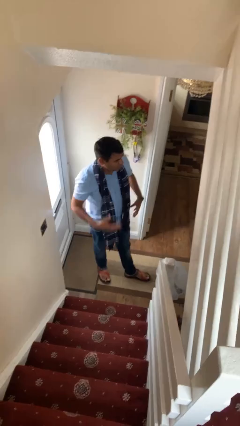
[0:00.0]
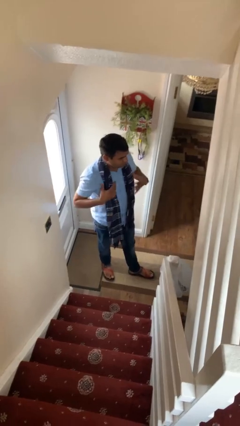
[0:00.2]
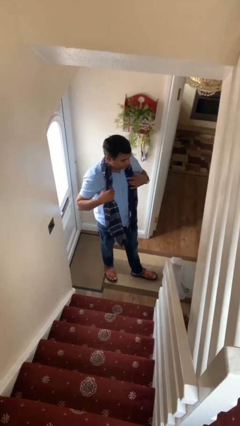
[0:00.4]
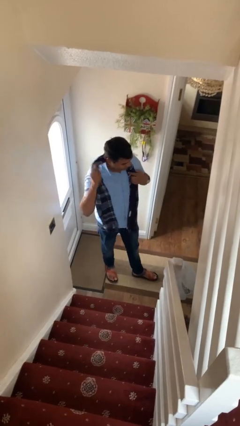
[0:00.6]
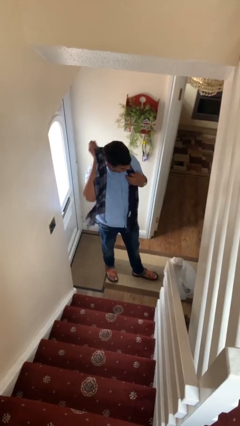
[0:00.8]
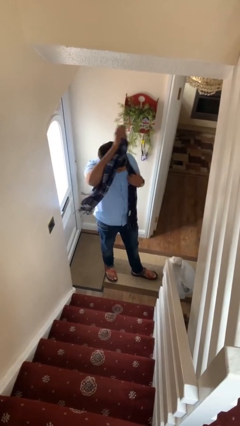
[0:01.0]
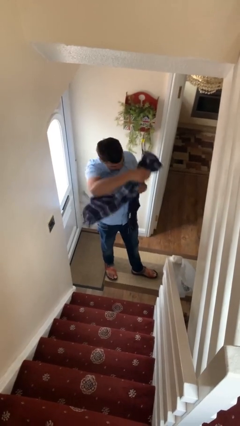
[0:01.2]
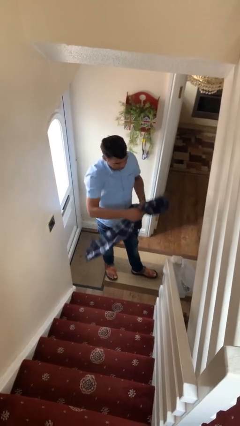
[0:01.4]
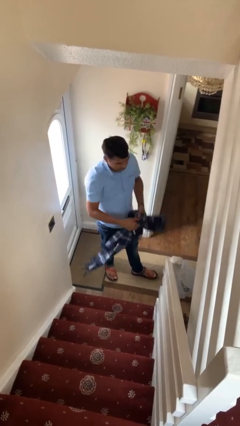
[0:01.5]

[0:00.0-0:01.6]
person takes off scarf

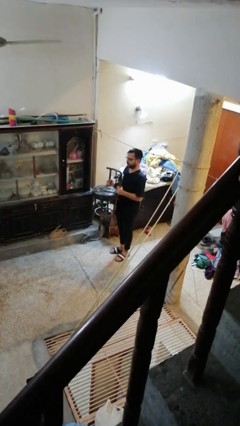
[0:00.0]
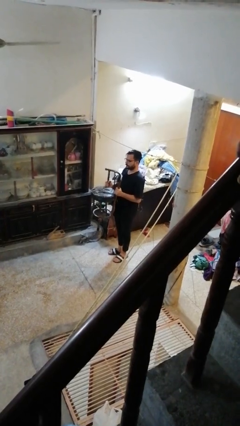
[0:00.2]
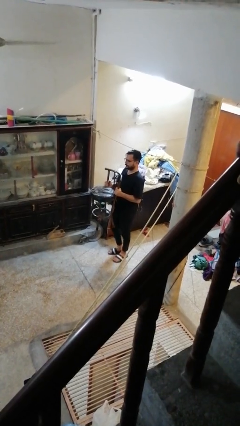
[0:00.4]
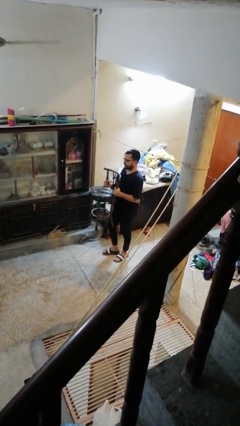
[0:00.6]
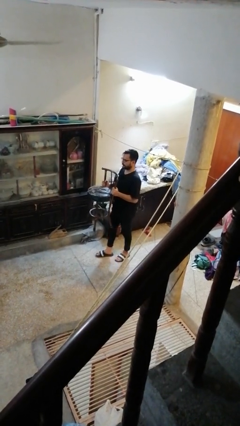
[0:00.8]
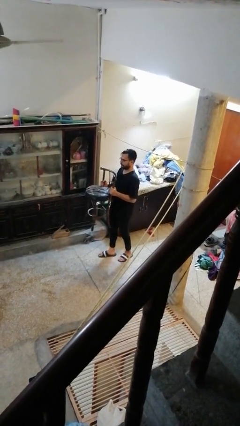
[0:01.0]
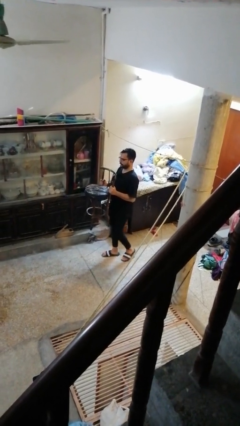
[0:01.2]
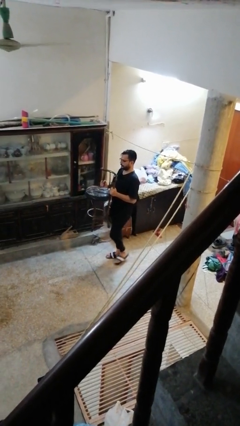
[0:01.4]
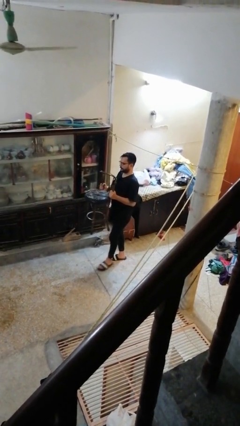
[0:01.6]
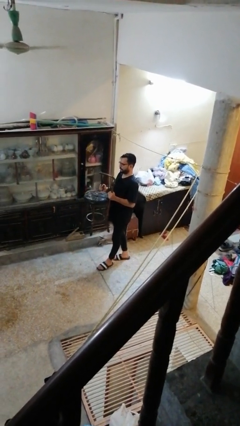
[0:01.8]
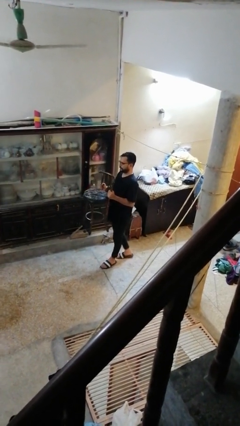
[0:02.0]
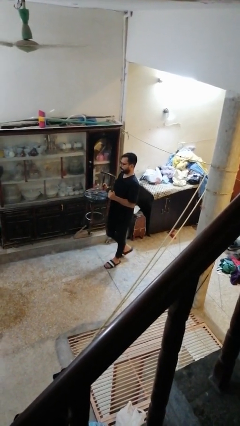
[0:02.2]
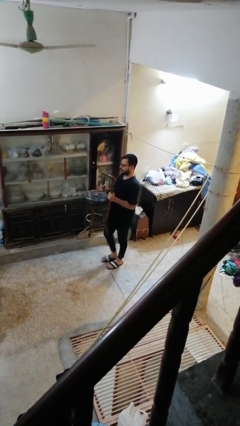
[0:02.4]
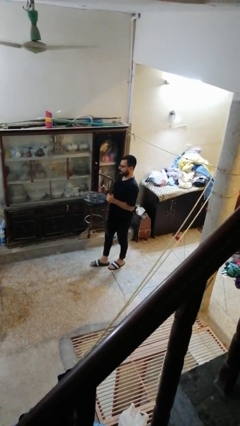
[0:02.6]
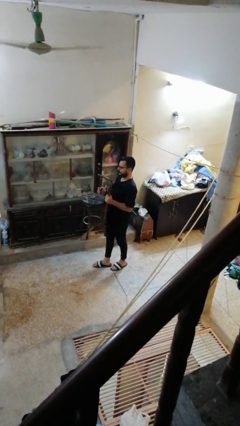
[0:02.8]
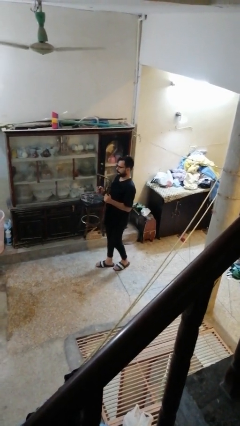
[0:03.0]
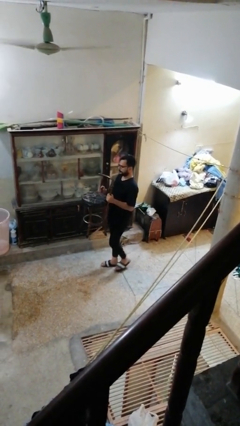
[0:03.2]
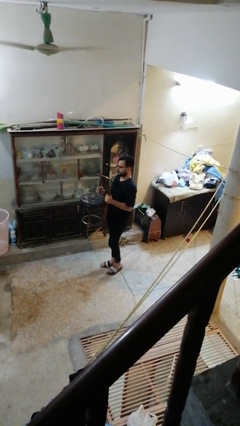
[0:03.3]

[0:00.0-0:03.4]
person carries furniture

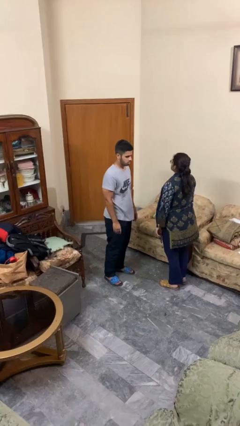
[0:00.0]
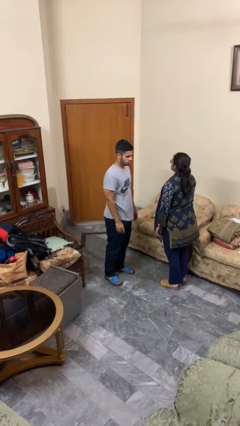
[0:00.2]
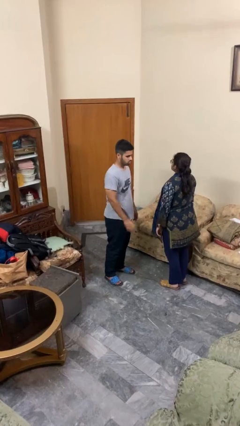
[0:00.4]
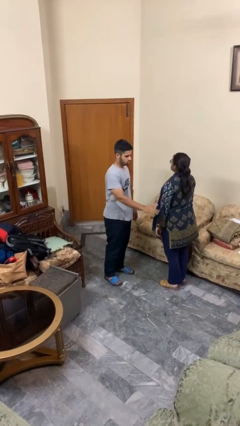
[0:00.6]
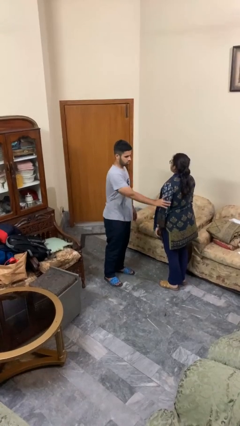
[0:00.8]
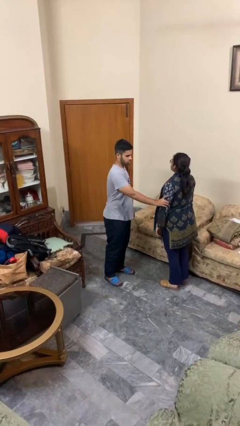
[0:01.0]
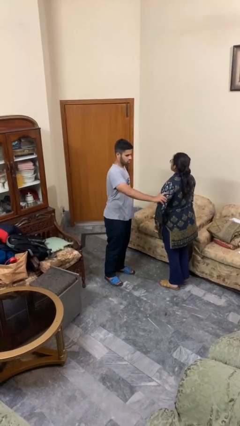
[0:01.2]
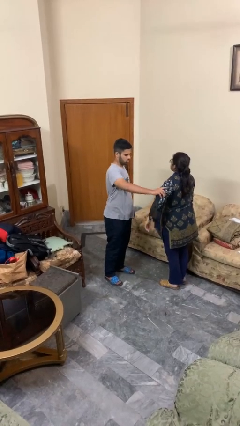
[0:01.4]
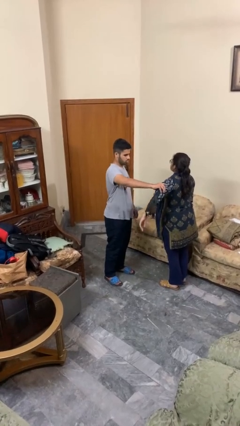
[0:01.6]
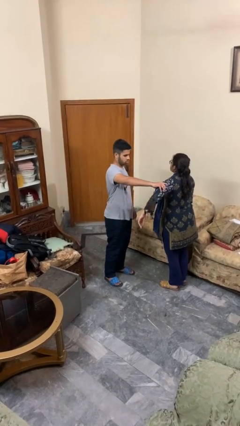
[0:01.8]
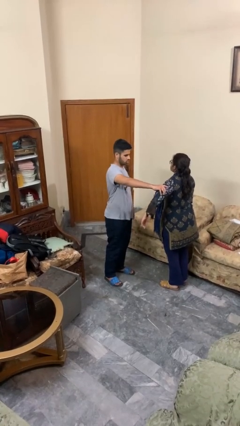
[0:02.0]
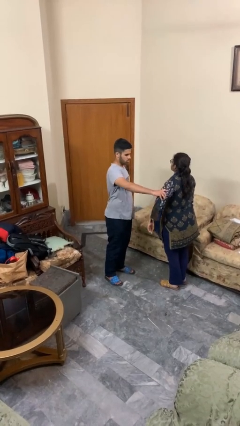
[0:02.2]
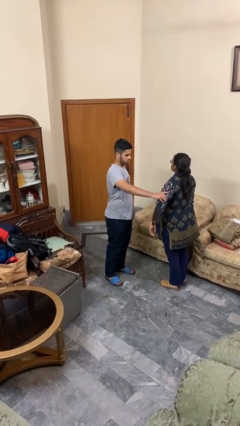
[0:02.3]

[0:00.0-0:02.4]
person grabs person by bicep

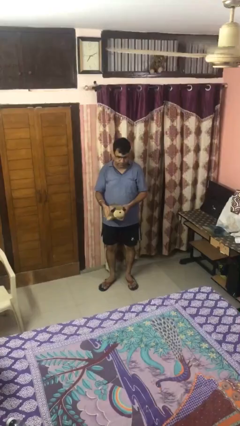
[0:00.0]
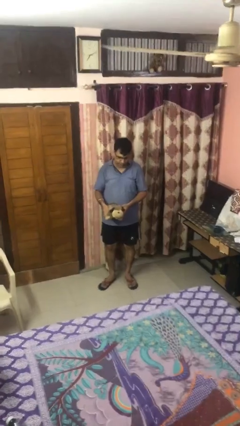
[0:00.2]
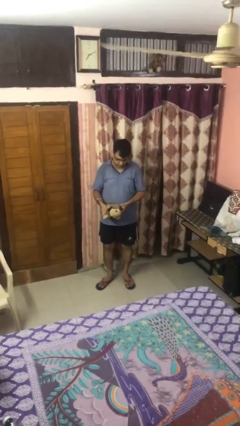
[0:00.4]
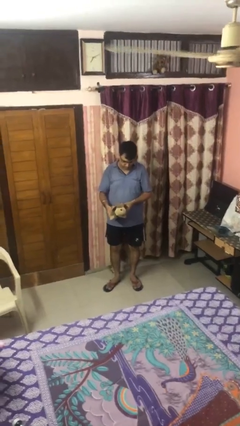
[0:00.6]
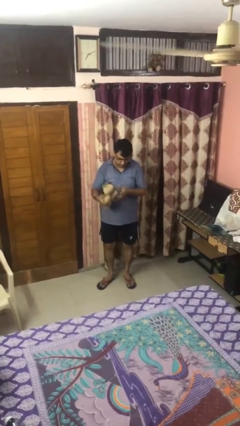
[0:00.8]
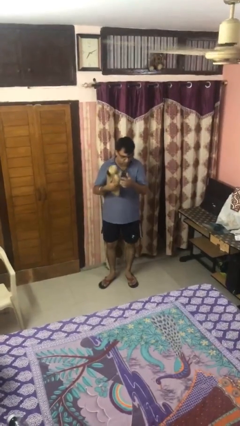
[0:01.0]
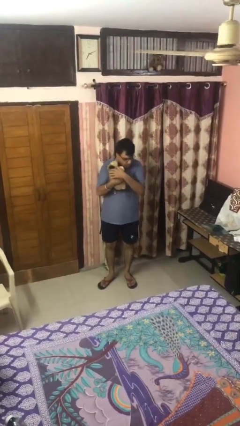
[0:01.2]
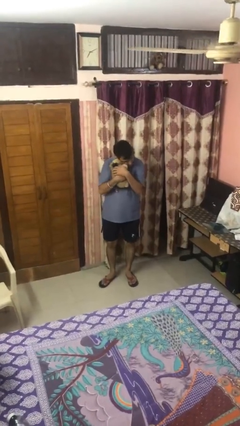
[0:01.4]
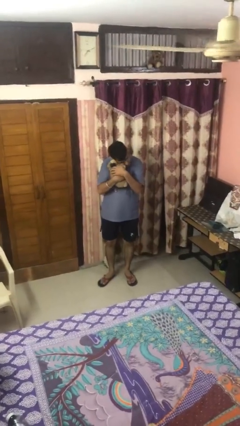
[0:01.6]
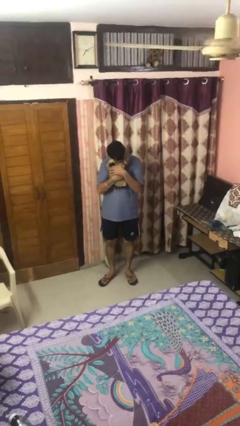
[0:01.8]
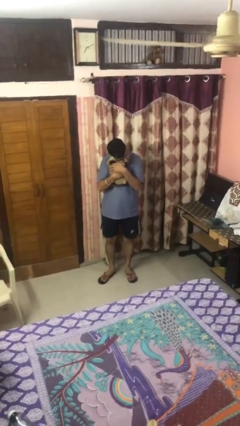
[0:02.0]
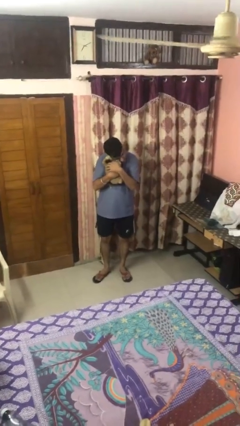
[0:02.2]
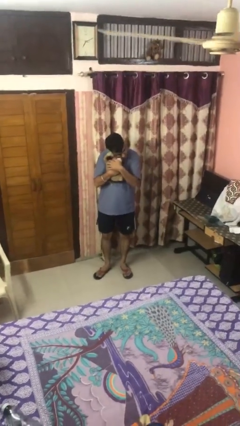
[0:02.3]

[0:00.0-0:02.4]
person hugs stuffed animal

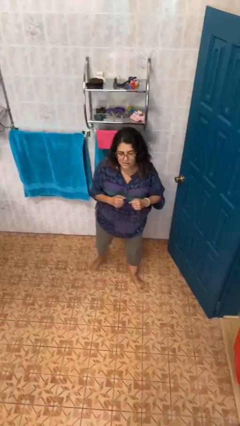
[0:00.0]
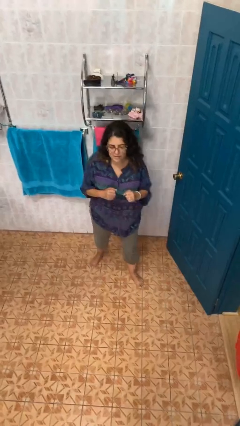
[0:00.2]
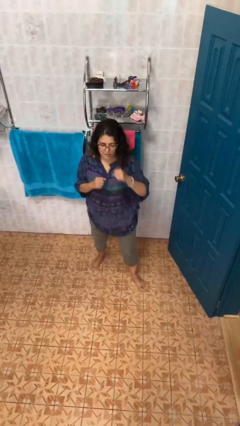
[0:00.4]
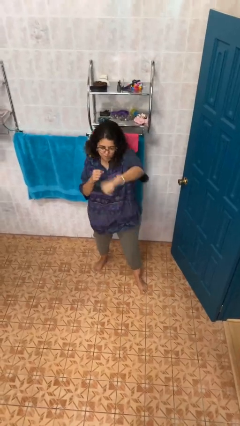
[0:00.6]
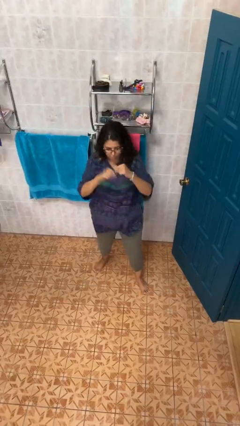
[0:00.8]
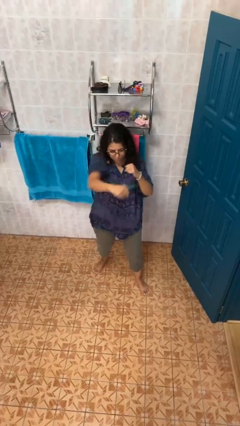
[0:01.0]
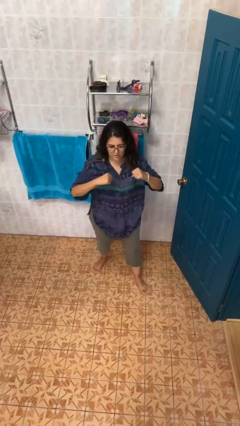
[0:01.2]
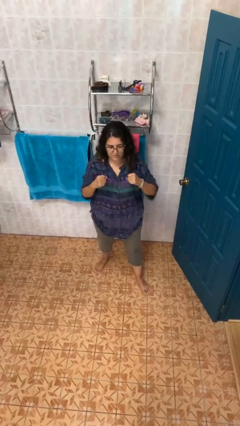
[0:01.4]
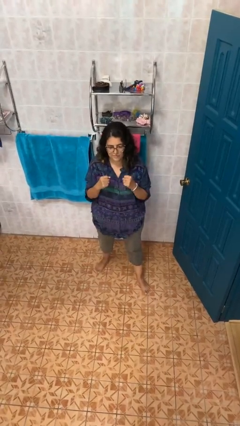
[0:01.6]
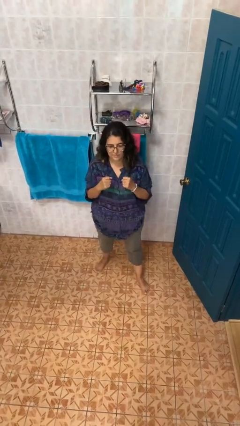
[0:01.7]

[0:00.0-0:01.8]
person punches

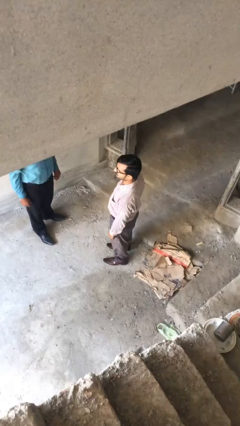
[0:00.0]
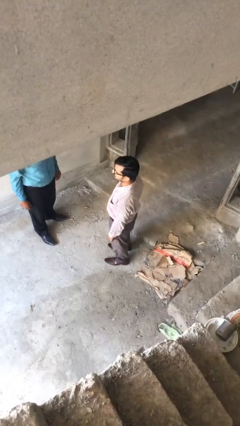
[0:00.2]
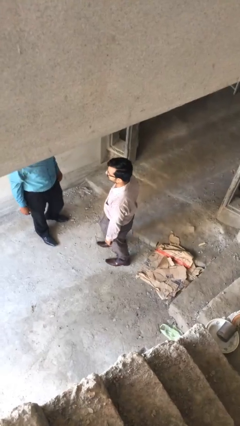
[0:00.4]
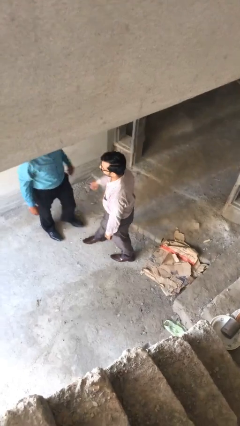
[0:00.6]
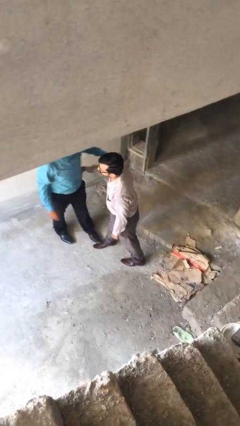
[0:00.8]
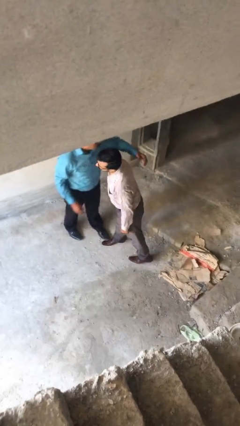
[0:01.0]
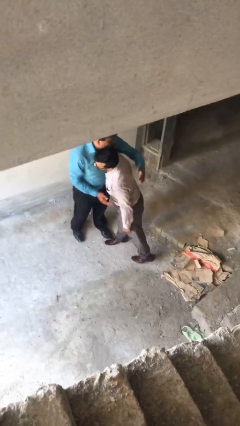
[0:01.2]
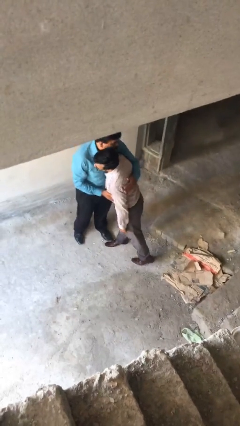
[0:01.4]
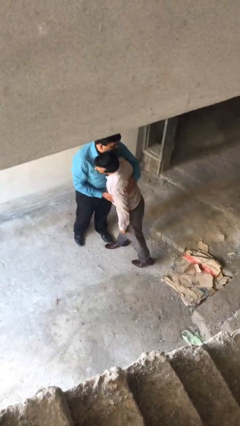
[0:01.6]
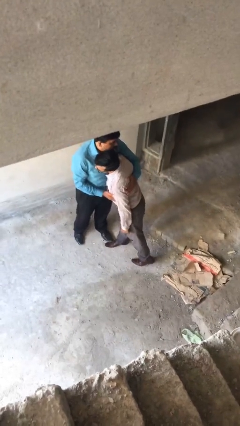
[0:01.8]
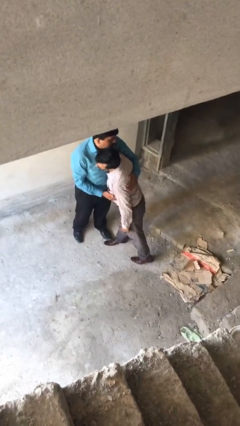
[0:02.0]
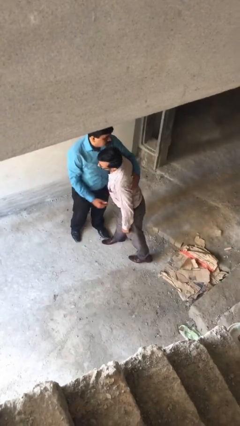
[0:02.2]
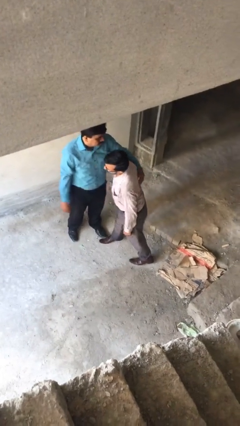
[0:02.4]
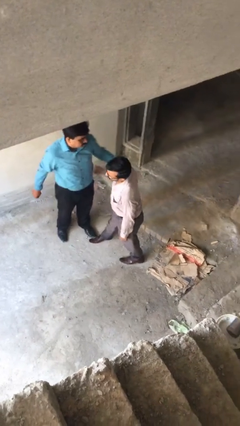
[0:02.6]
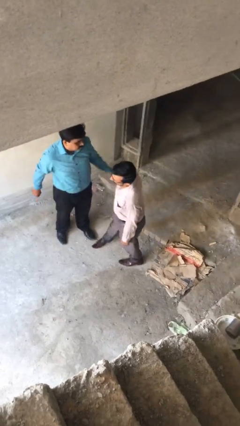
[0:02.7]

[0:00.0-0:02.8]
person embraces person

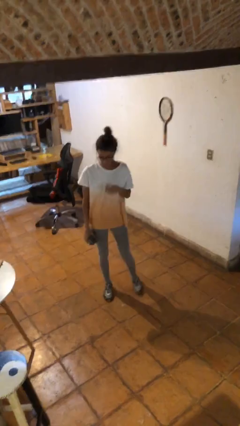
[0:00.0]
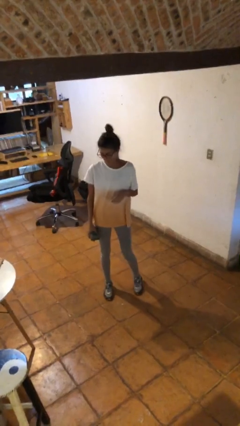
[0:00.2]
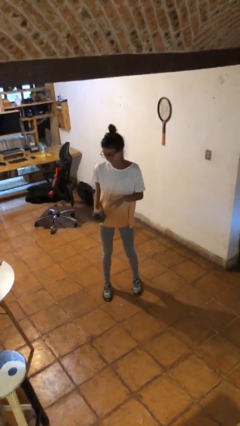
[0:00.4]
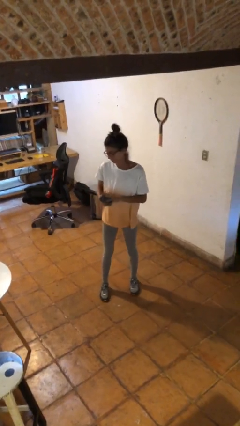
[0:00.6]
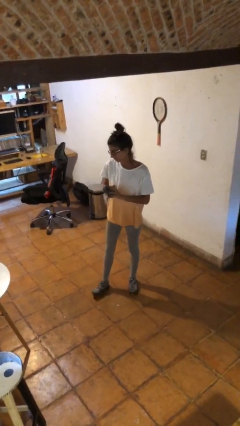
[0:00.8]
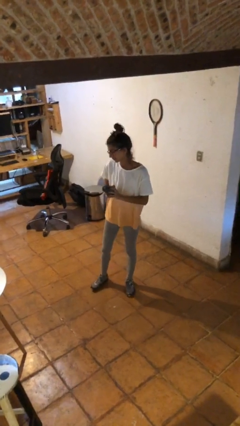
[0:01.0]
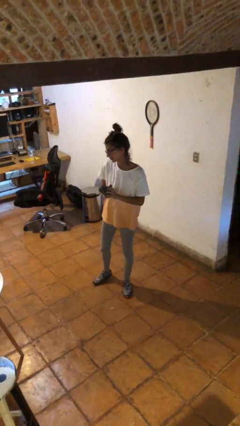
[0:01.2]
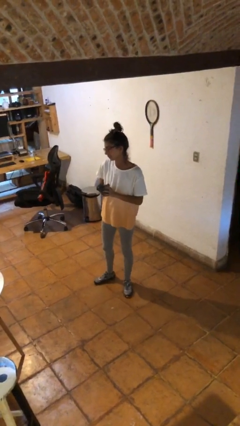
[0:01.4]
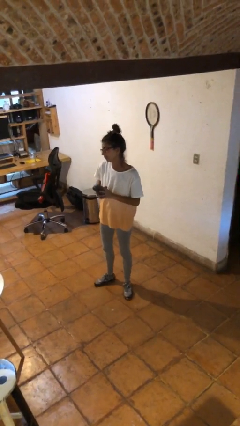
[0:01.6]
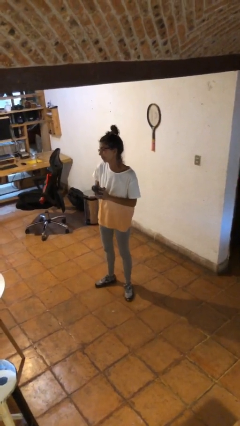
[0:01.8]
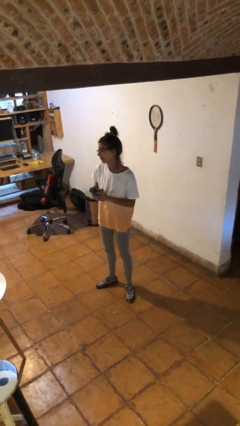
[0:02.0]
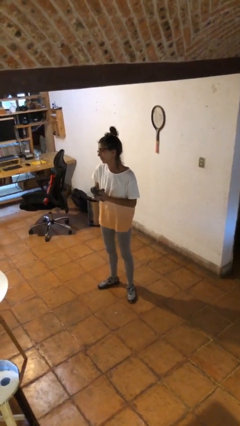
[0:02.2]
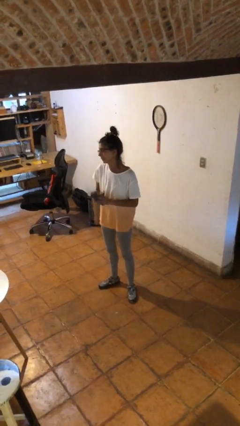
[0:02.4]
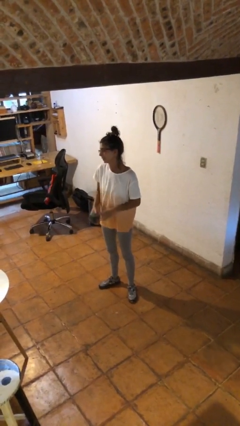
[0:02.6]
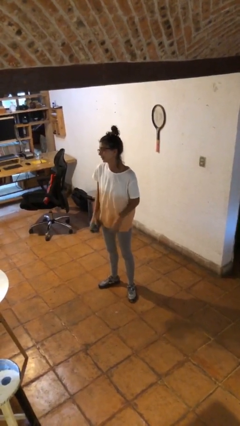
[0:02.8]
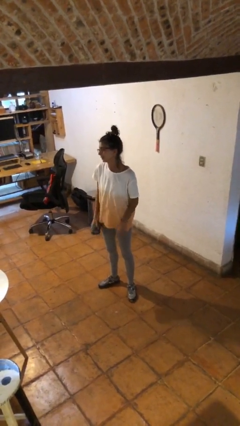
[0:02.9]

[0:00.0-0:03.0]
person squeezes object
